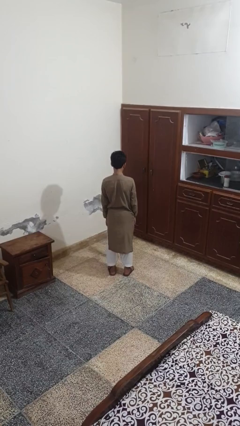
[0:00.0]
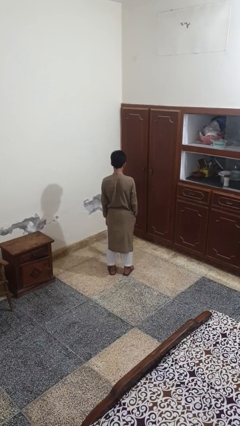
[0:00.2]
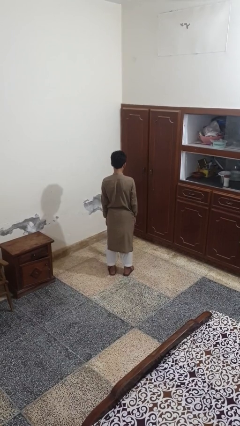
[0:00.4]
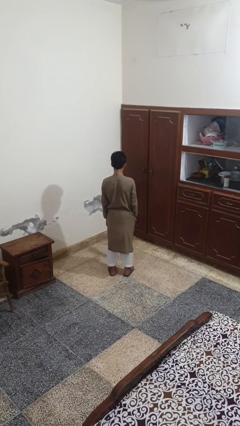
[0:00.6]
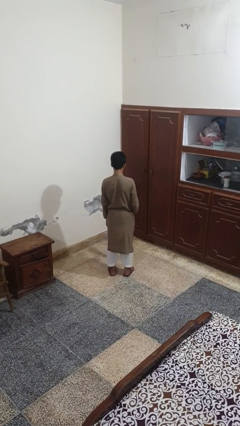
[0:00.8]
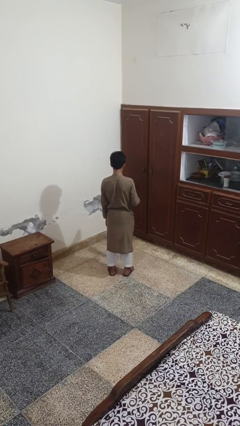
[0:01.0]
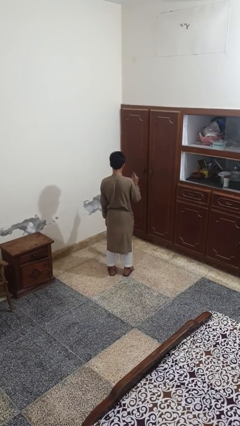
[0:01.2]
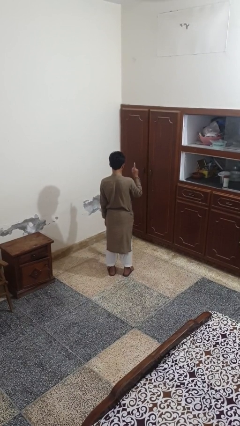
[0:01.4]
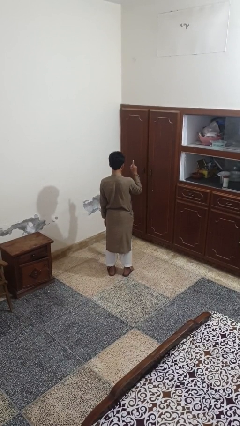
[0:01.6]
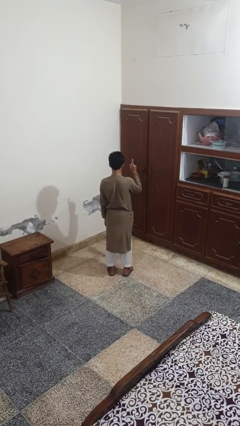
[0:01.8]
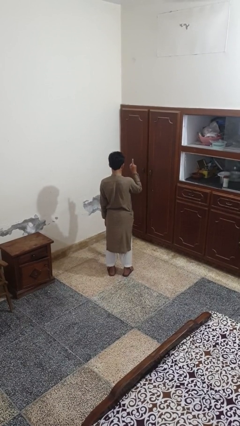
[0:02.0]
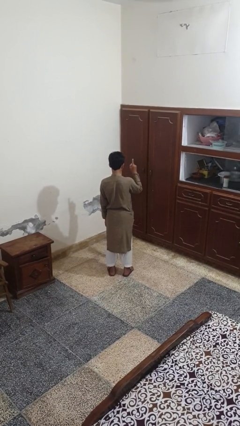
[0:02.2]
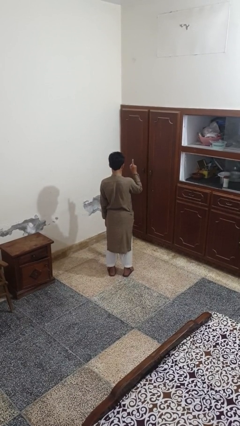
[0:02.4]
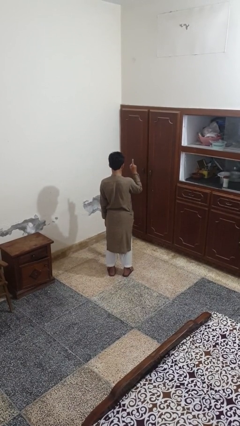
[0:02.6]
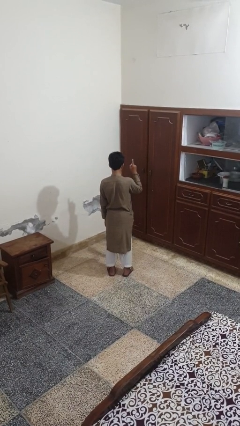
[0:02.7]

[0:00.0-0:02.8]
person gestures number one

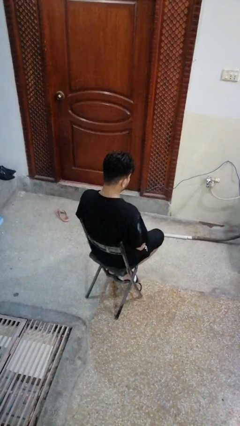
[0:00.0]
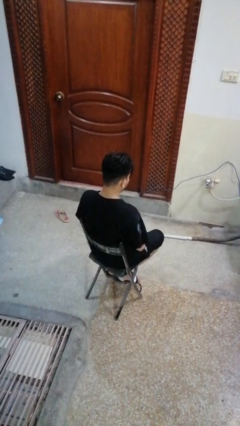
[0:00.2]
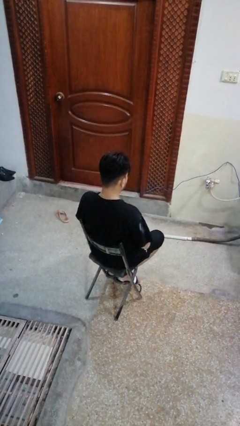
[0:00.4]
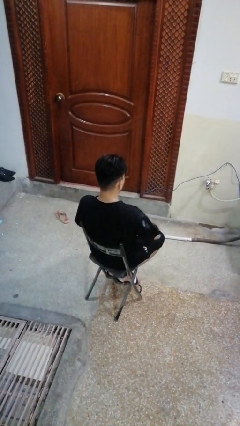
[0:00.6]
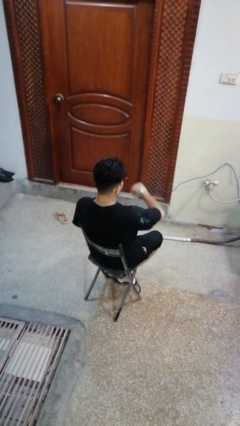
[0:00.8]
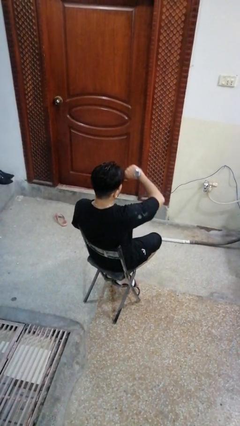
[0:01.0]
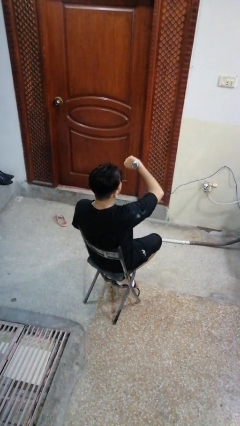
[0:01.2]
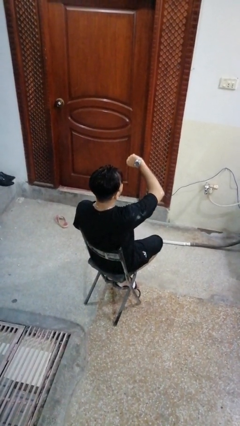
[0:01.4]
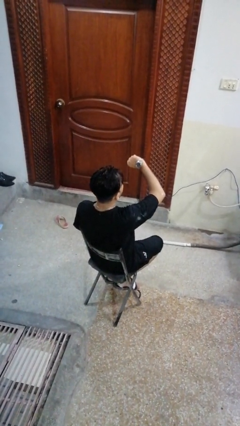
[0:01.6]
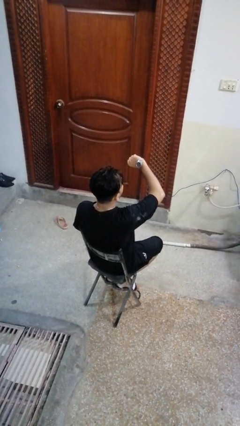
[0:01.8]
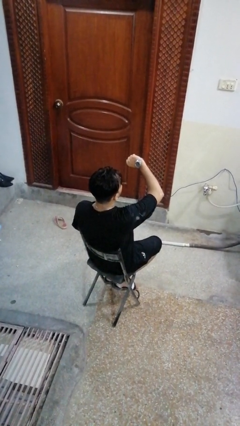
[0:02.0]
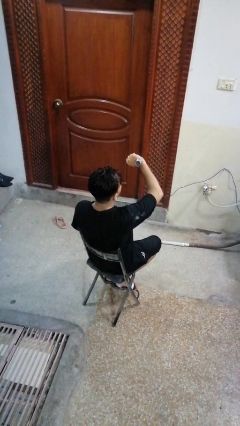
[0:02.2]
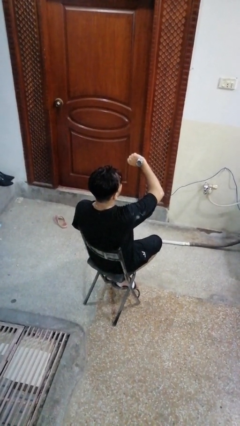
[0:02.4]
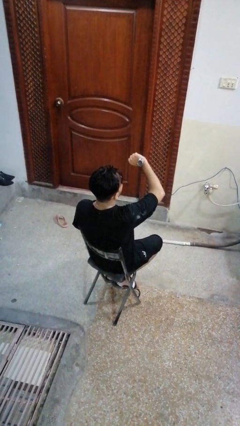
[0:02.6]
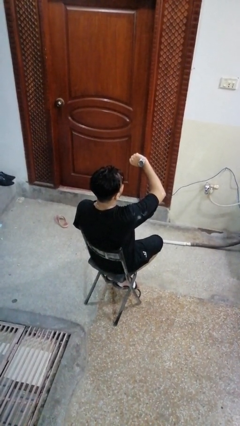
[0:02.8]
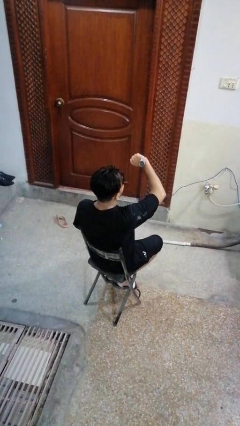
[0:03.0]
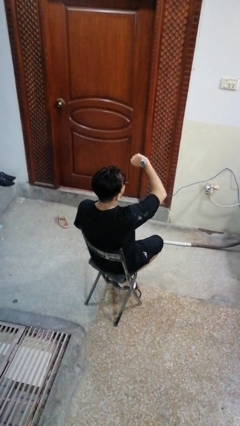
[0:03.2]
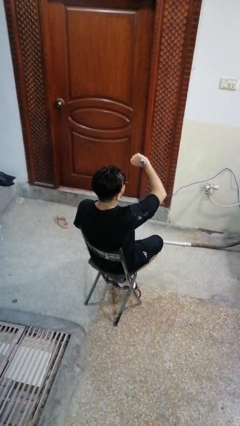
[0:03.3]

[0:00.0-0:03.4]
person looks at wristwatch

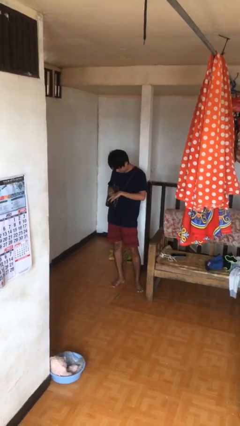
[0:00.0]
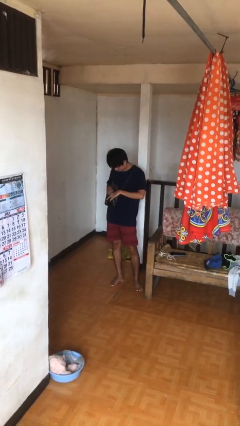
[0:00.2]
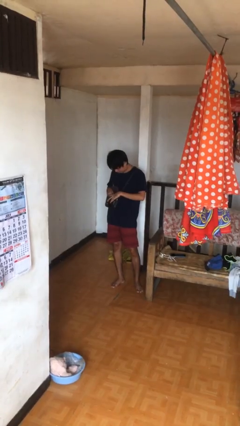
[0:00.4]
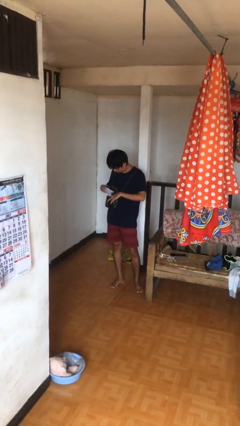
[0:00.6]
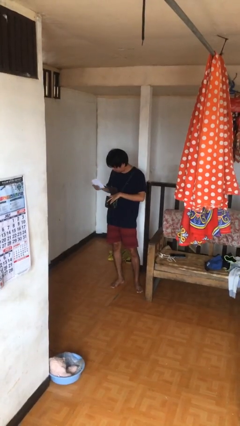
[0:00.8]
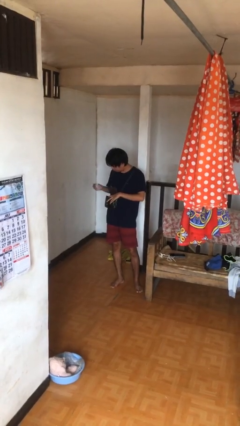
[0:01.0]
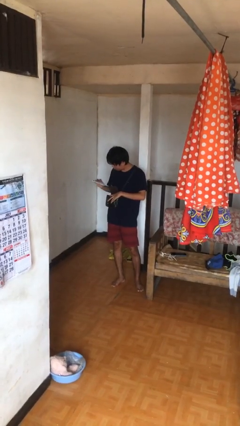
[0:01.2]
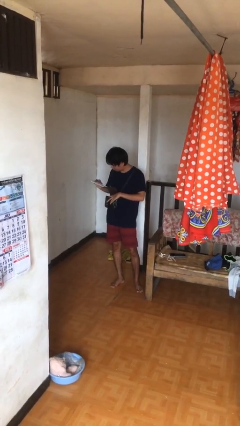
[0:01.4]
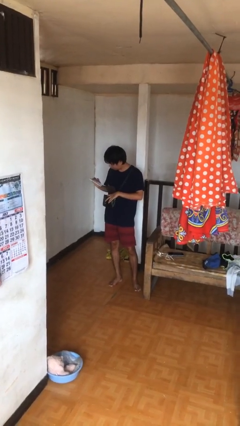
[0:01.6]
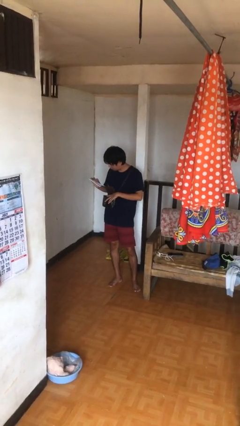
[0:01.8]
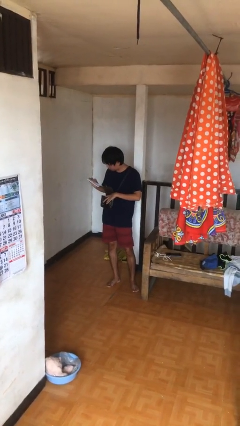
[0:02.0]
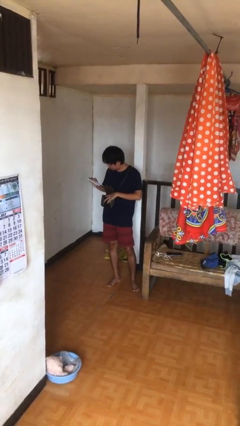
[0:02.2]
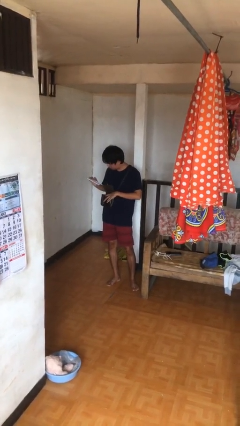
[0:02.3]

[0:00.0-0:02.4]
person takes object from purse

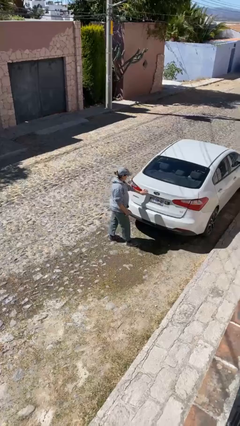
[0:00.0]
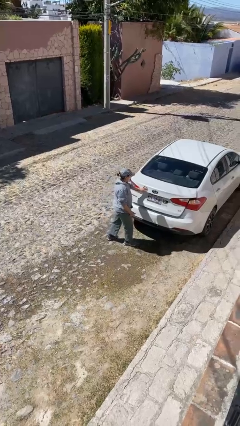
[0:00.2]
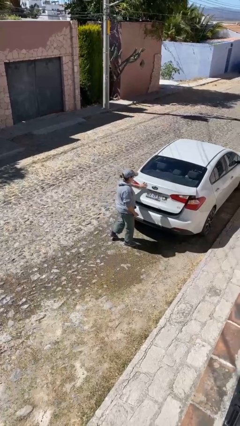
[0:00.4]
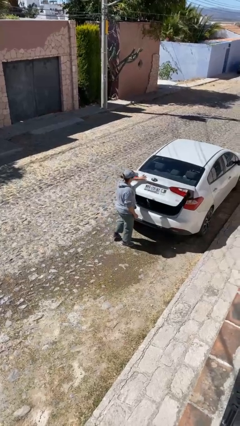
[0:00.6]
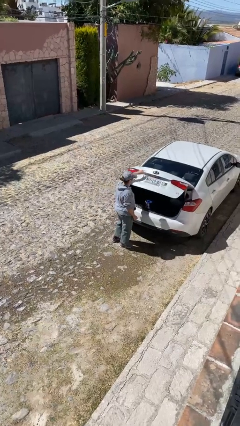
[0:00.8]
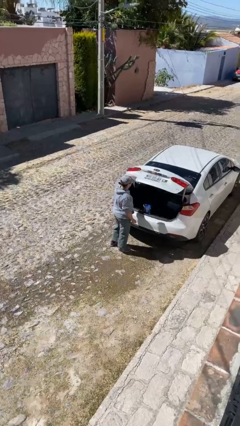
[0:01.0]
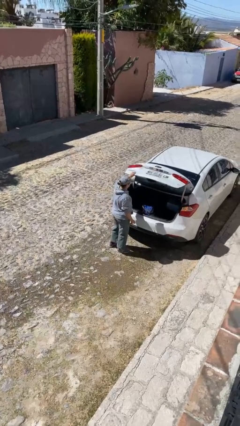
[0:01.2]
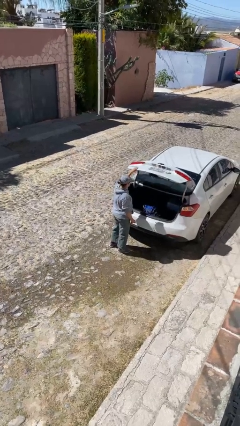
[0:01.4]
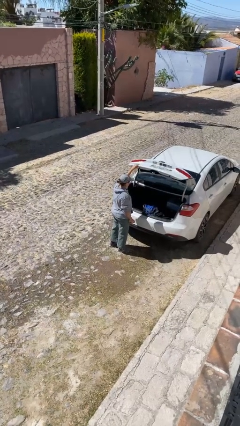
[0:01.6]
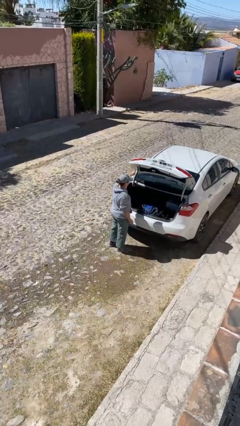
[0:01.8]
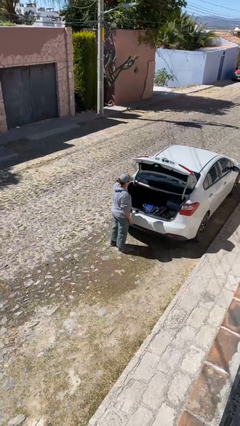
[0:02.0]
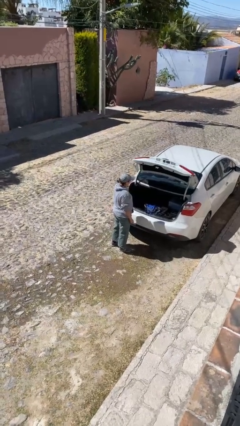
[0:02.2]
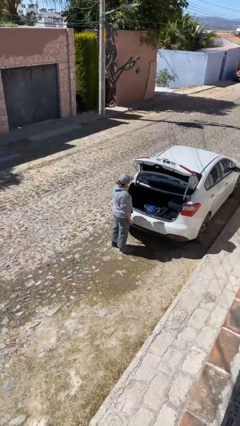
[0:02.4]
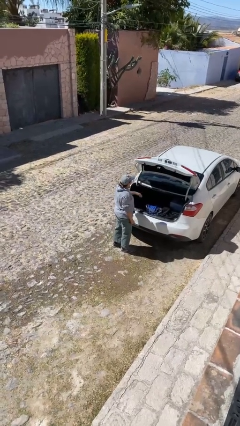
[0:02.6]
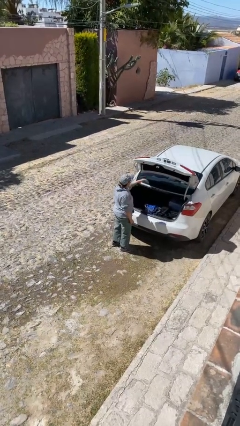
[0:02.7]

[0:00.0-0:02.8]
person opens car trunk

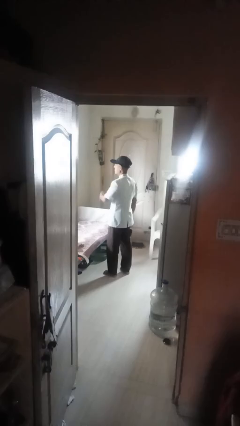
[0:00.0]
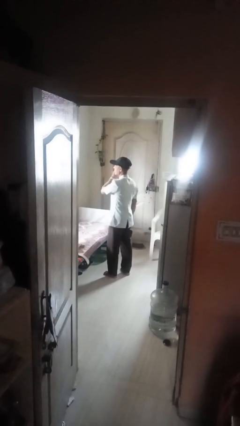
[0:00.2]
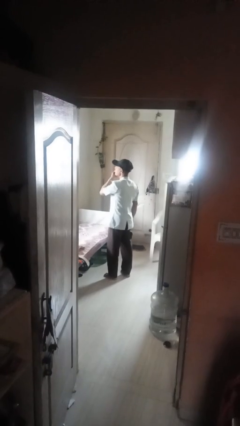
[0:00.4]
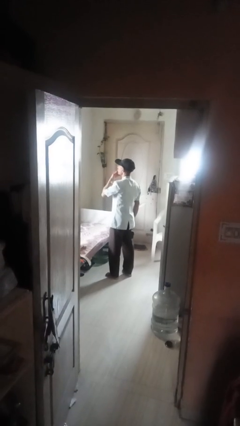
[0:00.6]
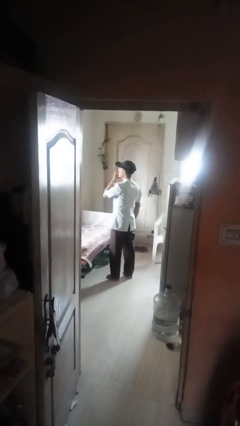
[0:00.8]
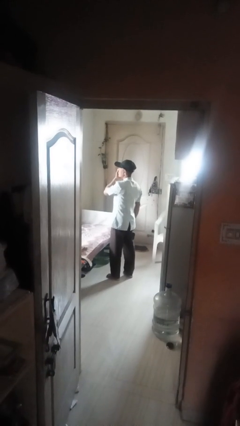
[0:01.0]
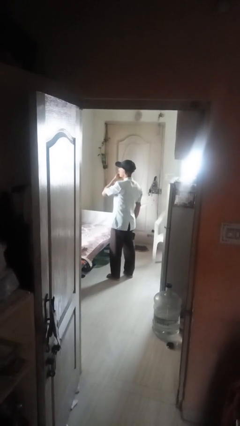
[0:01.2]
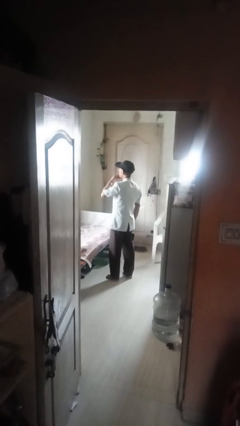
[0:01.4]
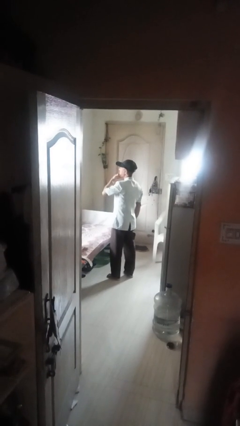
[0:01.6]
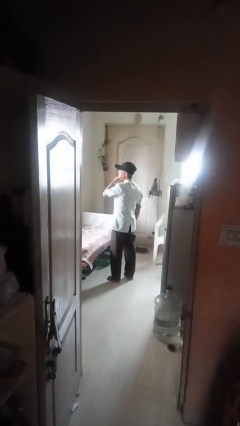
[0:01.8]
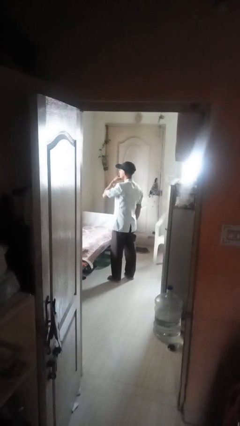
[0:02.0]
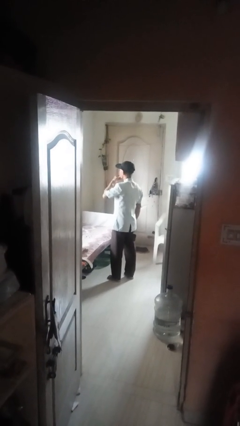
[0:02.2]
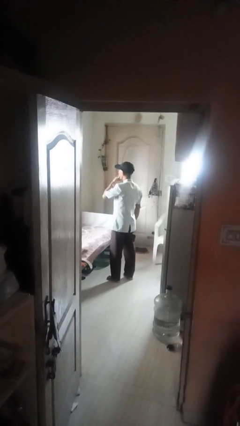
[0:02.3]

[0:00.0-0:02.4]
person strokes chin

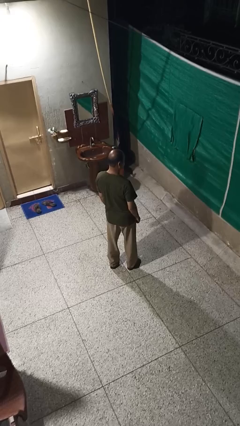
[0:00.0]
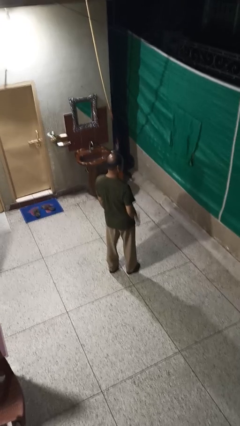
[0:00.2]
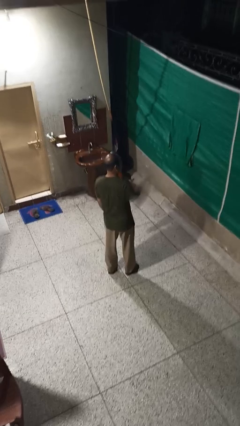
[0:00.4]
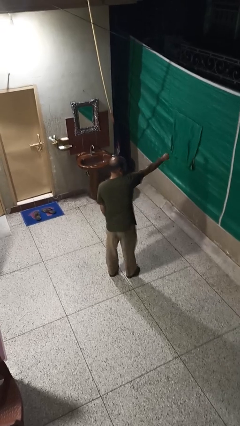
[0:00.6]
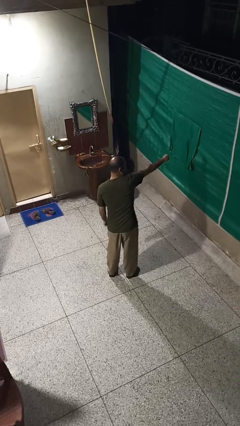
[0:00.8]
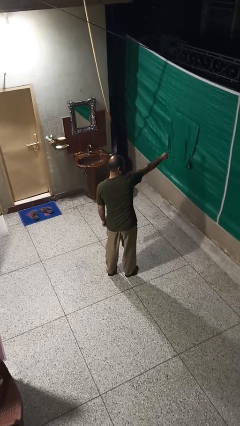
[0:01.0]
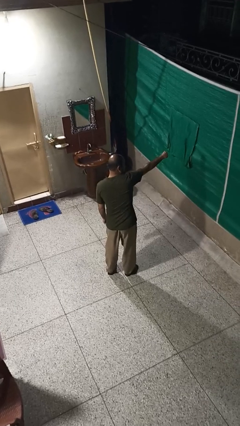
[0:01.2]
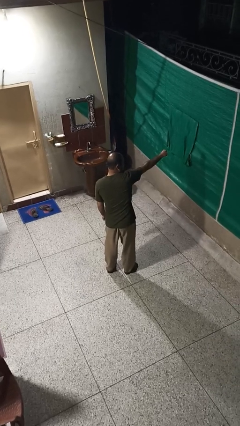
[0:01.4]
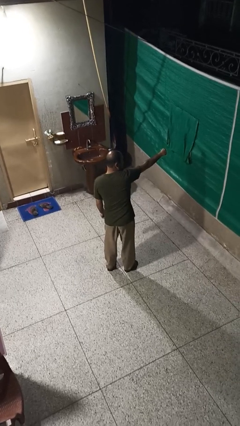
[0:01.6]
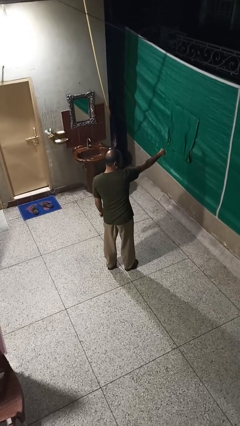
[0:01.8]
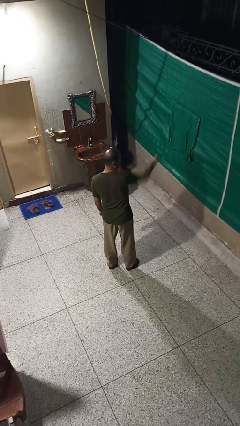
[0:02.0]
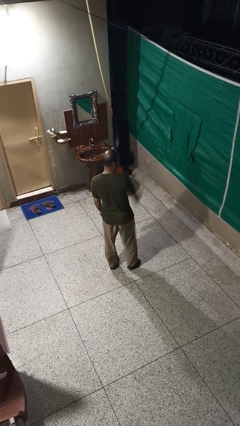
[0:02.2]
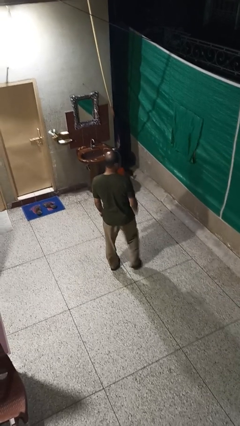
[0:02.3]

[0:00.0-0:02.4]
person punches

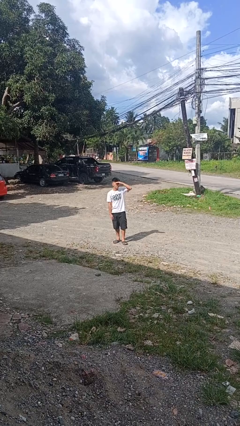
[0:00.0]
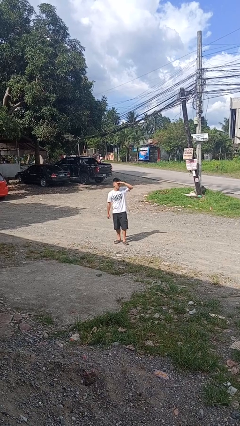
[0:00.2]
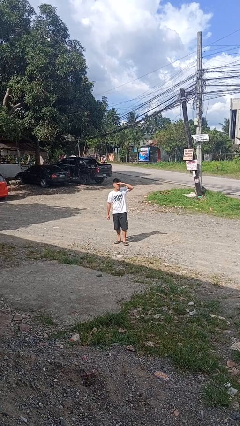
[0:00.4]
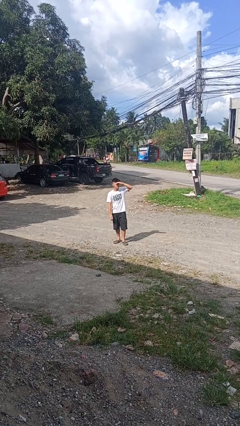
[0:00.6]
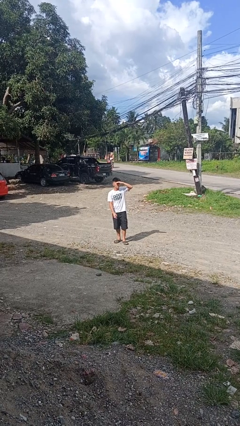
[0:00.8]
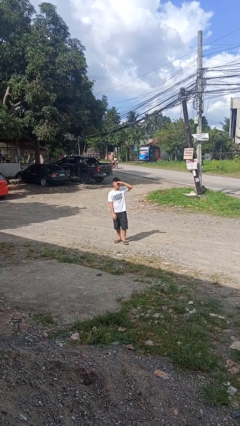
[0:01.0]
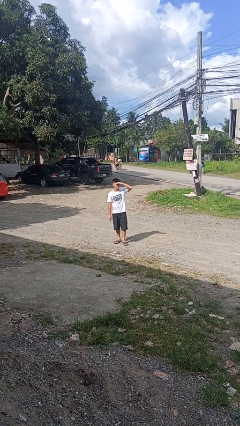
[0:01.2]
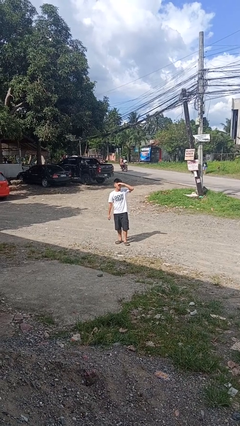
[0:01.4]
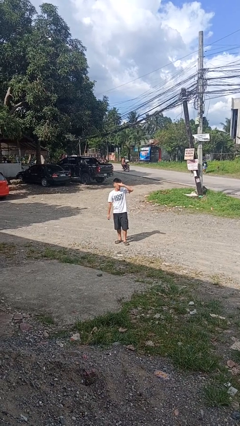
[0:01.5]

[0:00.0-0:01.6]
person shades eyes
